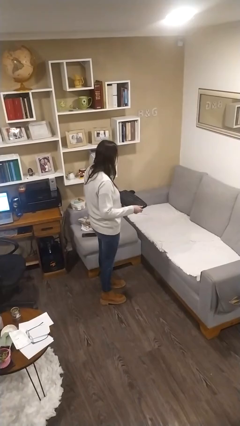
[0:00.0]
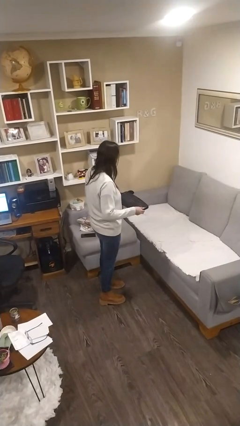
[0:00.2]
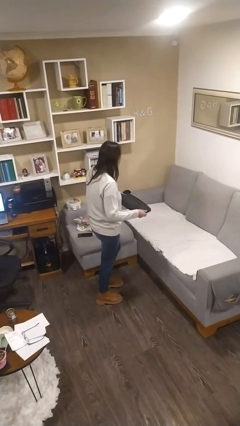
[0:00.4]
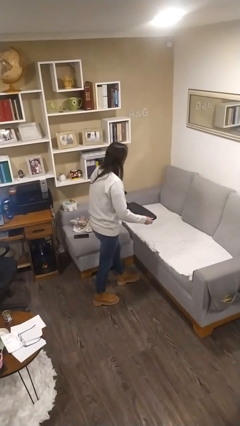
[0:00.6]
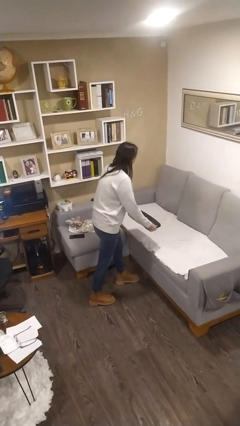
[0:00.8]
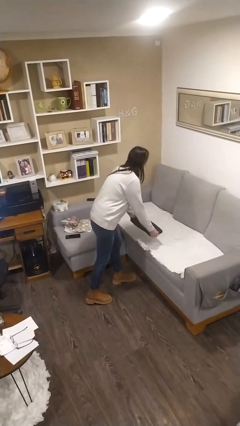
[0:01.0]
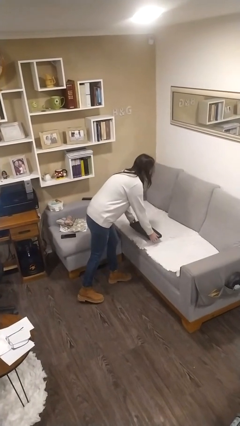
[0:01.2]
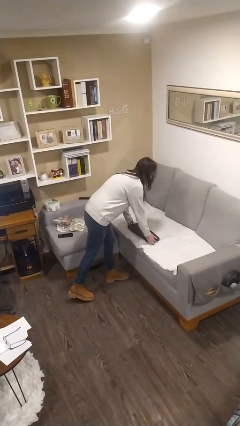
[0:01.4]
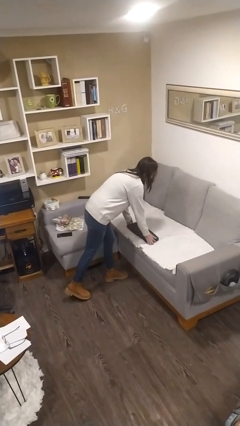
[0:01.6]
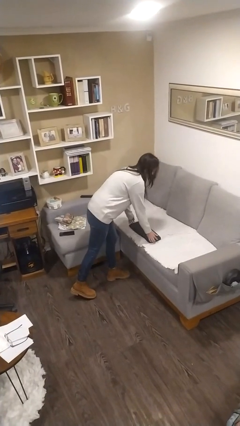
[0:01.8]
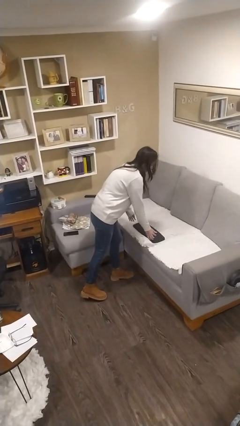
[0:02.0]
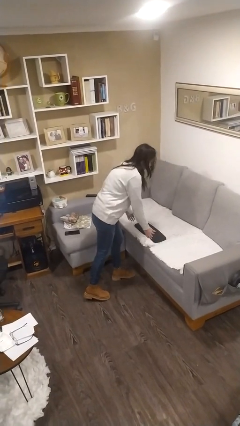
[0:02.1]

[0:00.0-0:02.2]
person puts down object on couch

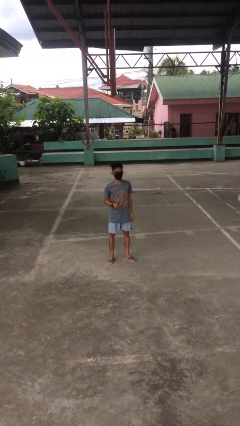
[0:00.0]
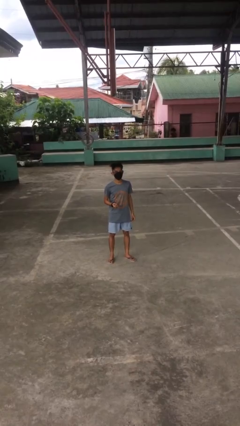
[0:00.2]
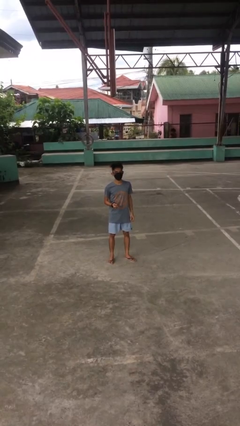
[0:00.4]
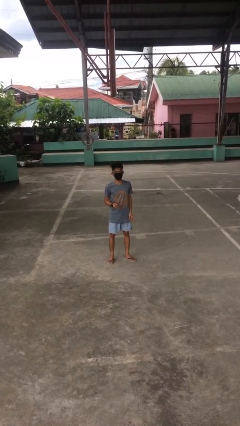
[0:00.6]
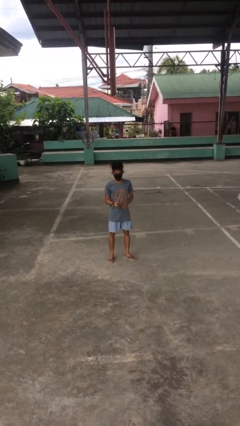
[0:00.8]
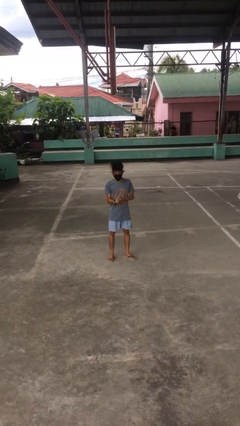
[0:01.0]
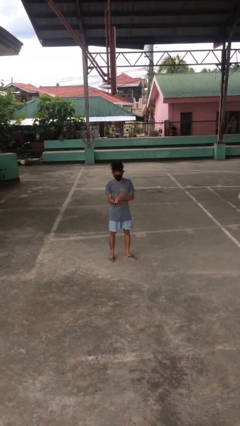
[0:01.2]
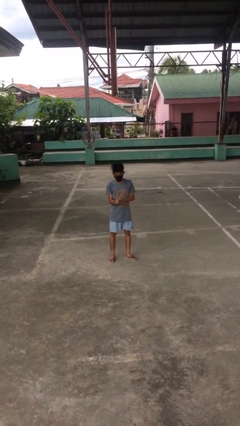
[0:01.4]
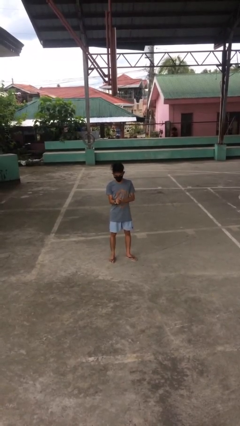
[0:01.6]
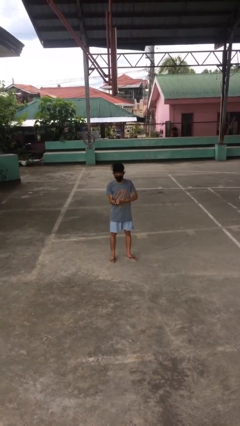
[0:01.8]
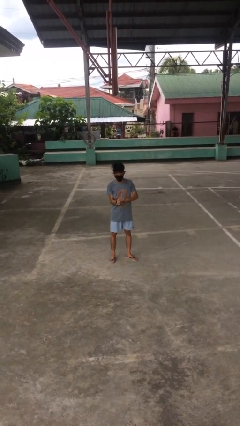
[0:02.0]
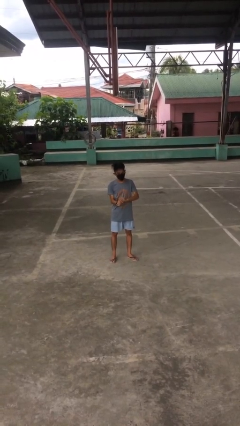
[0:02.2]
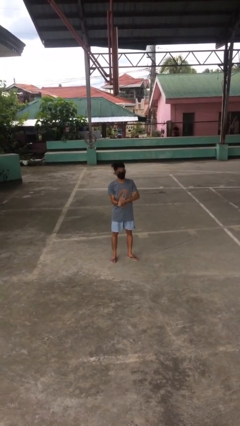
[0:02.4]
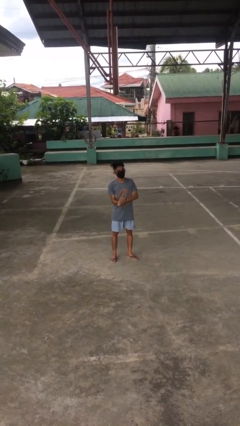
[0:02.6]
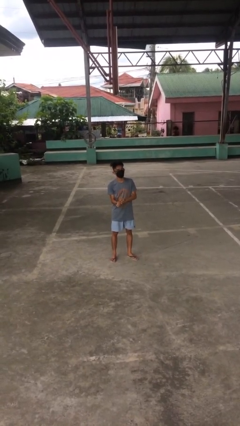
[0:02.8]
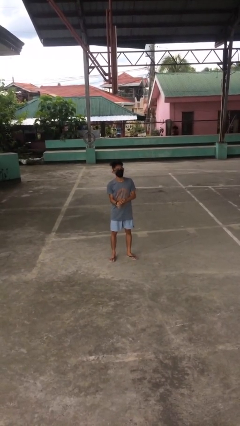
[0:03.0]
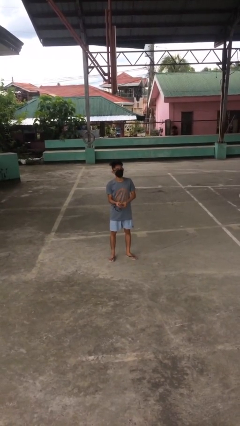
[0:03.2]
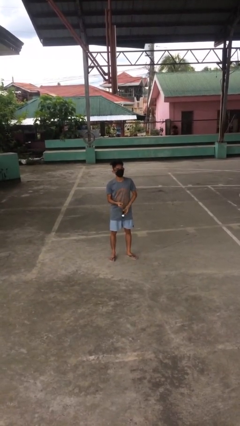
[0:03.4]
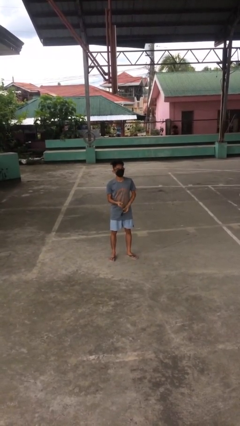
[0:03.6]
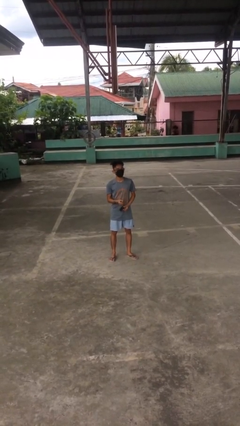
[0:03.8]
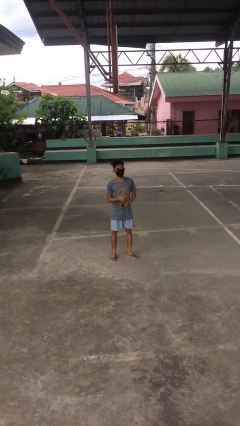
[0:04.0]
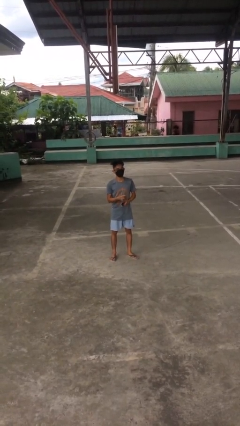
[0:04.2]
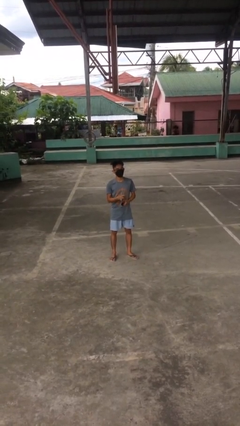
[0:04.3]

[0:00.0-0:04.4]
person takes off wristwatch

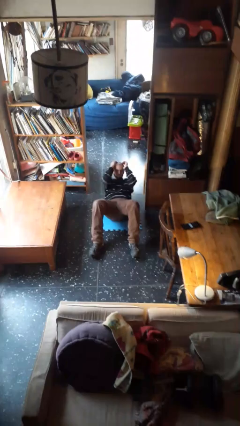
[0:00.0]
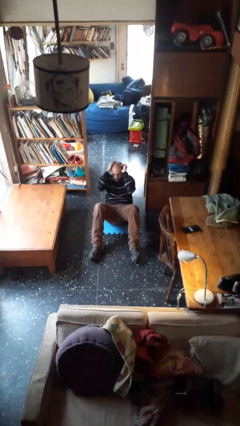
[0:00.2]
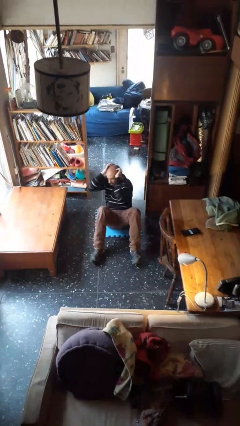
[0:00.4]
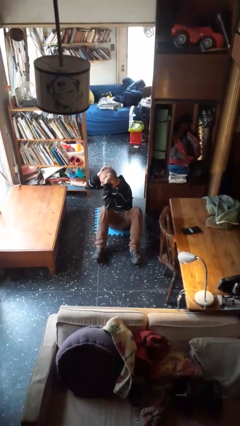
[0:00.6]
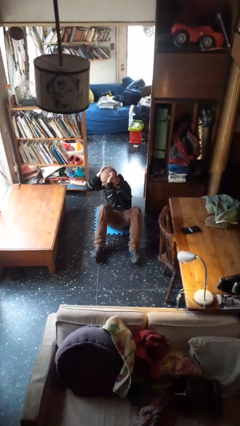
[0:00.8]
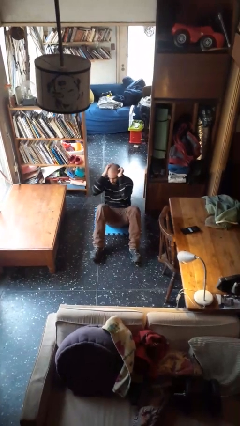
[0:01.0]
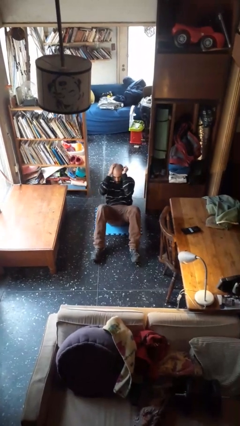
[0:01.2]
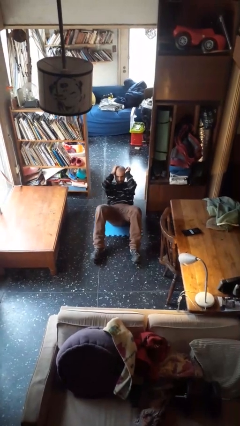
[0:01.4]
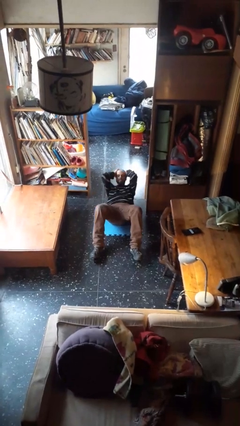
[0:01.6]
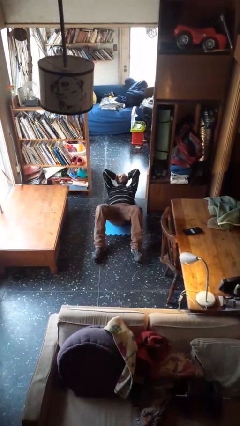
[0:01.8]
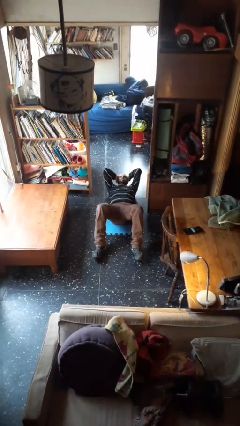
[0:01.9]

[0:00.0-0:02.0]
person exercises with situp

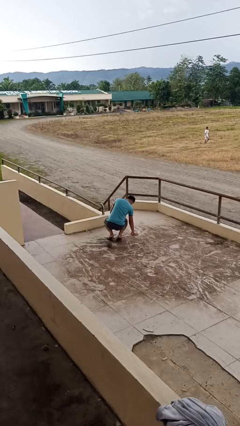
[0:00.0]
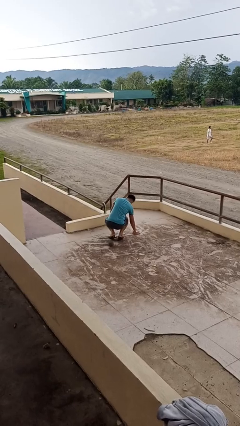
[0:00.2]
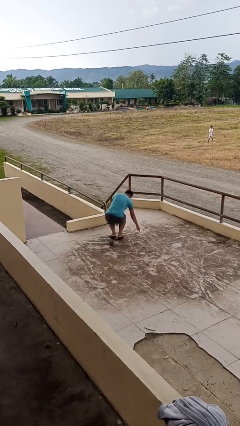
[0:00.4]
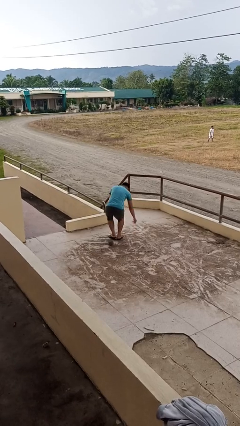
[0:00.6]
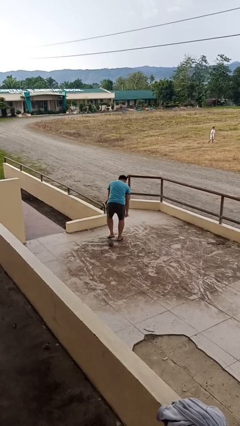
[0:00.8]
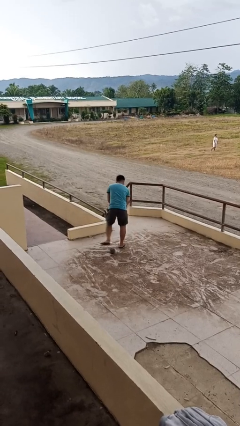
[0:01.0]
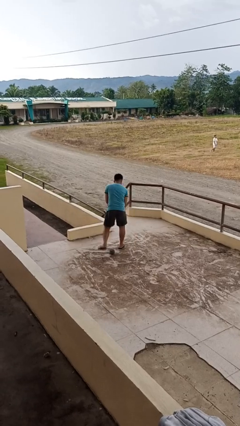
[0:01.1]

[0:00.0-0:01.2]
person stands up from floor

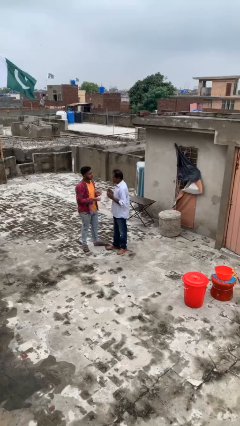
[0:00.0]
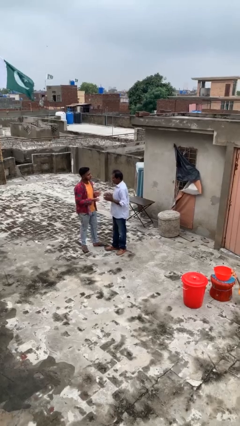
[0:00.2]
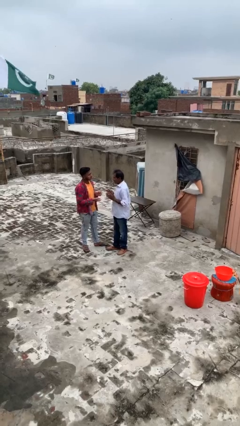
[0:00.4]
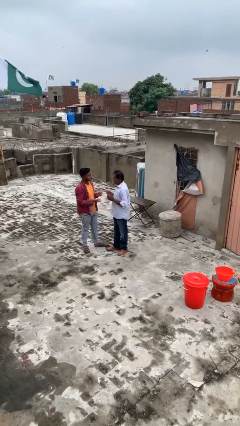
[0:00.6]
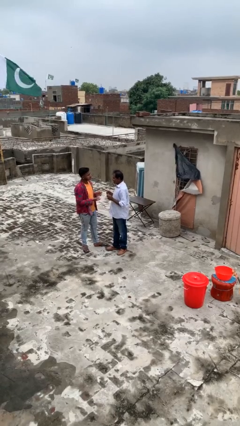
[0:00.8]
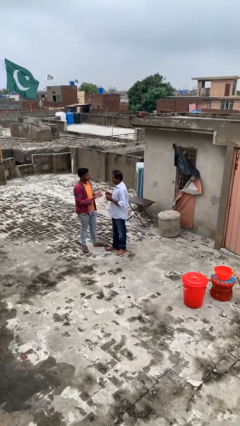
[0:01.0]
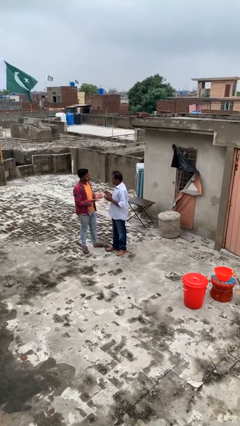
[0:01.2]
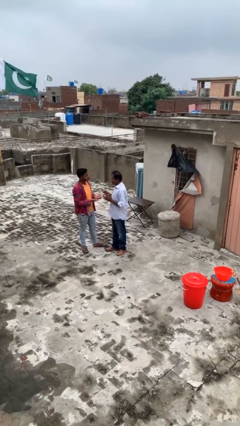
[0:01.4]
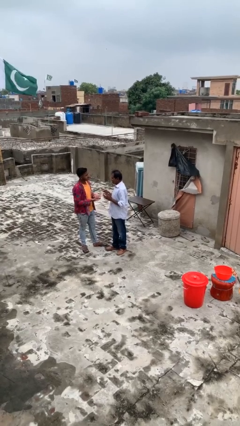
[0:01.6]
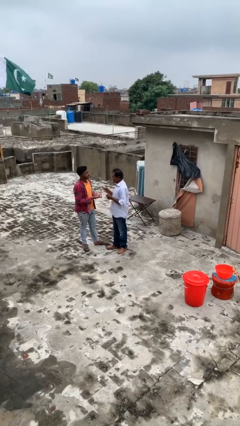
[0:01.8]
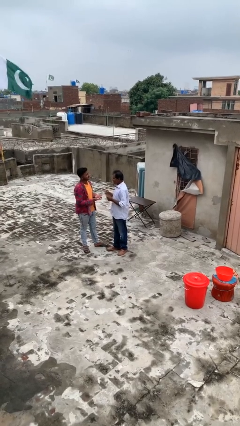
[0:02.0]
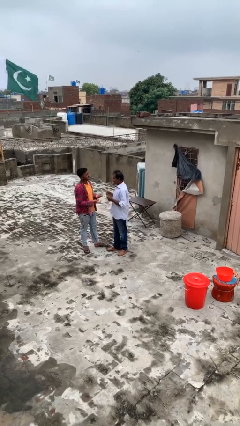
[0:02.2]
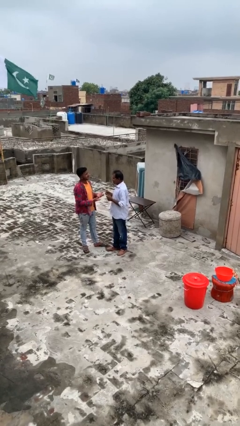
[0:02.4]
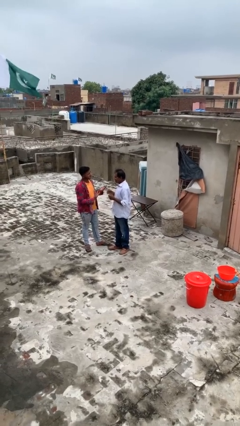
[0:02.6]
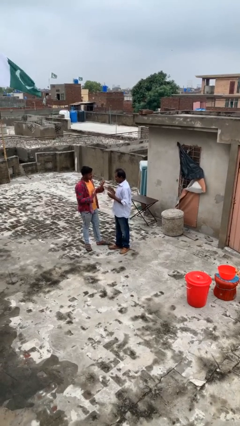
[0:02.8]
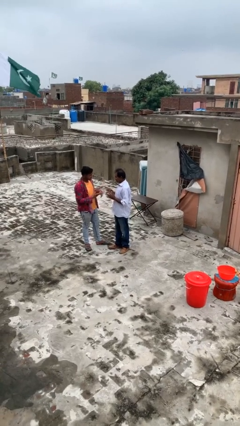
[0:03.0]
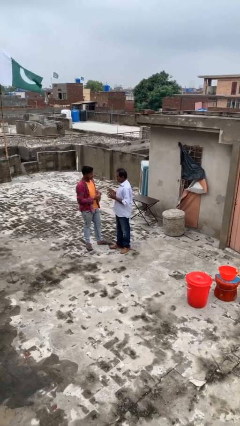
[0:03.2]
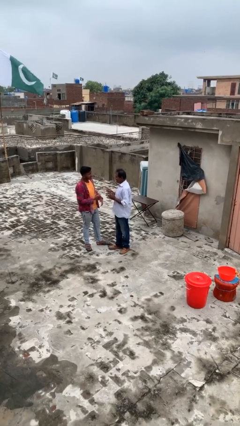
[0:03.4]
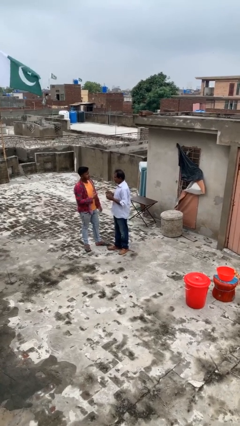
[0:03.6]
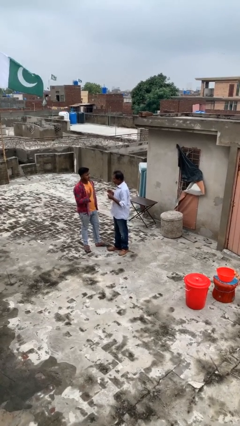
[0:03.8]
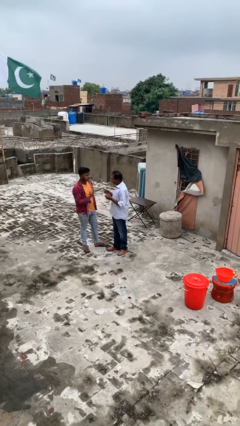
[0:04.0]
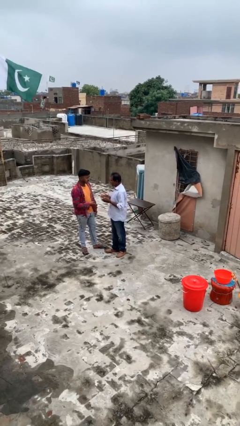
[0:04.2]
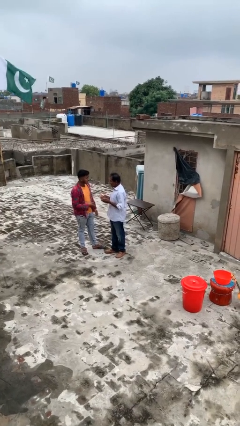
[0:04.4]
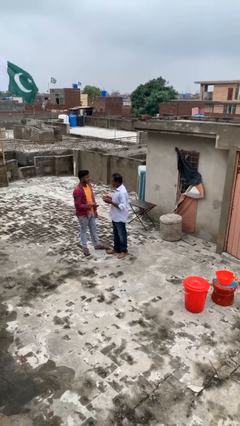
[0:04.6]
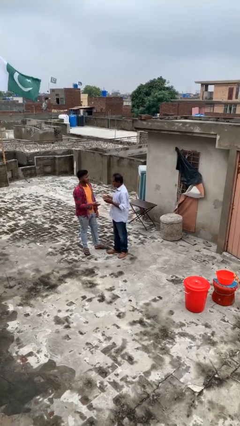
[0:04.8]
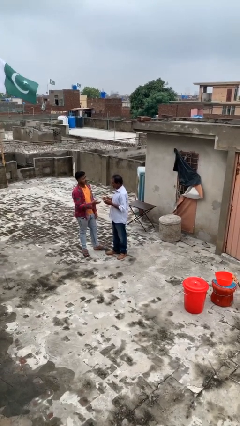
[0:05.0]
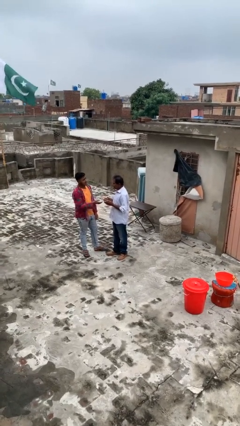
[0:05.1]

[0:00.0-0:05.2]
person talks to person

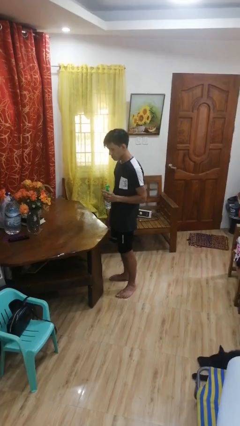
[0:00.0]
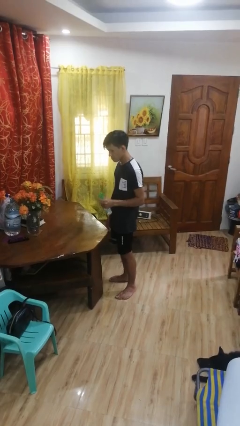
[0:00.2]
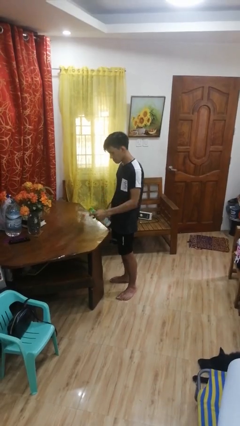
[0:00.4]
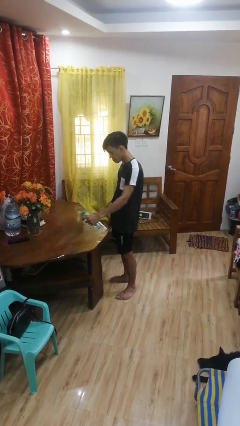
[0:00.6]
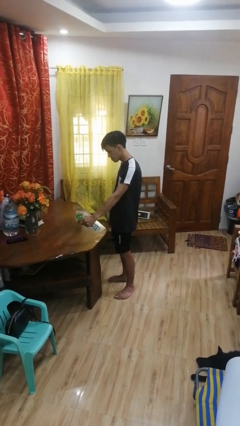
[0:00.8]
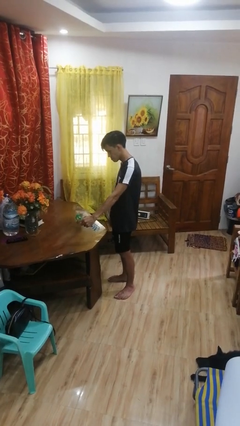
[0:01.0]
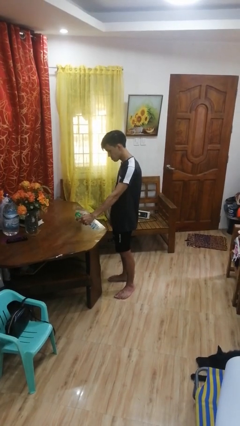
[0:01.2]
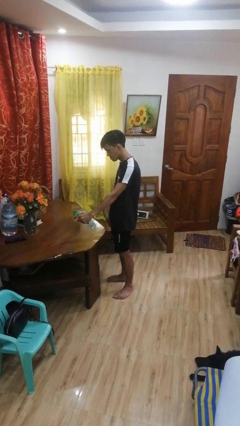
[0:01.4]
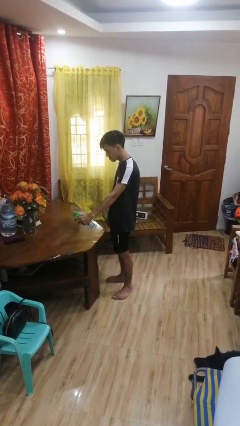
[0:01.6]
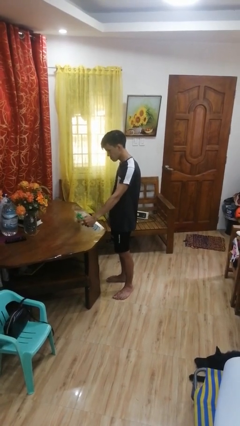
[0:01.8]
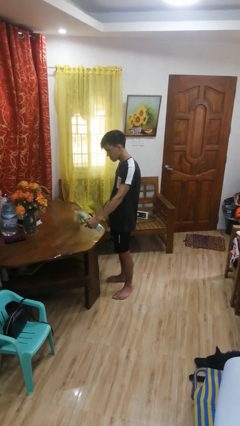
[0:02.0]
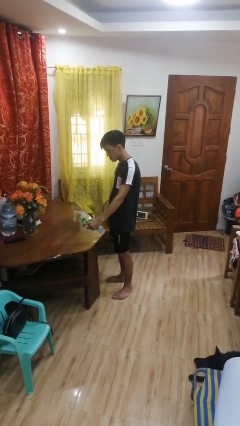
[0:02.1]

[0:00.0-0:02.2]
person sprays from bottle
